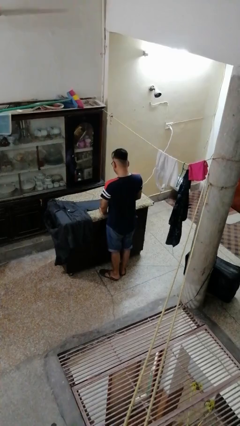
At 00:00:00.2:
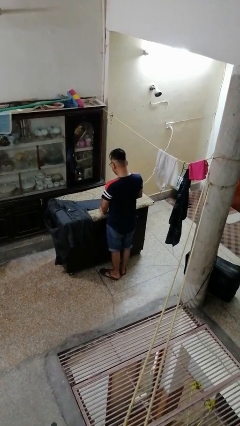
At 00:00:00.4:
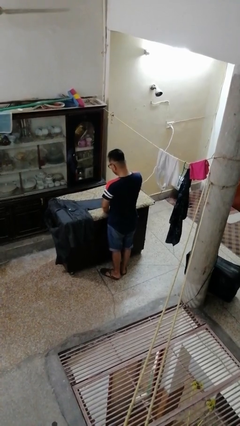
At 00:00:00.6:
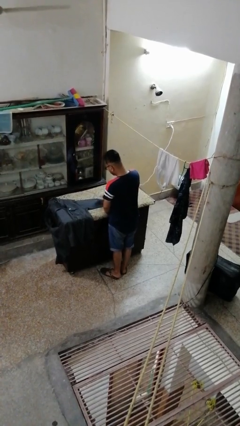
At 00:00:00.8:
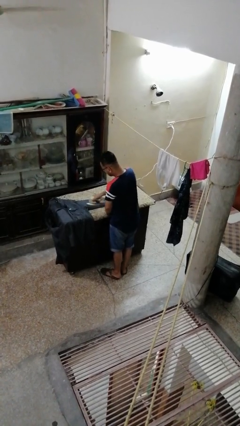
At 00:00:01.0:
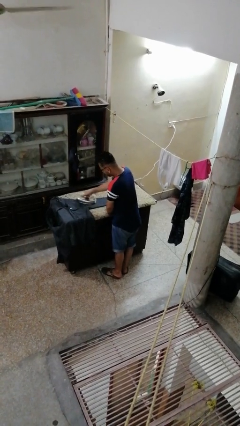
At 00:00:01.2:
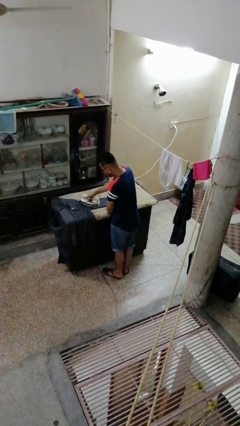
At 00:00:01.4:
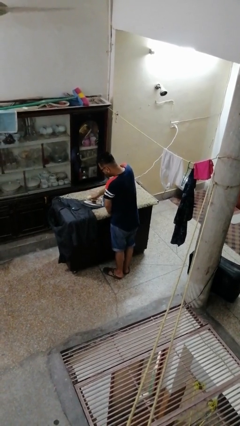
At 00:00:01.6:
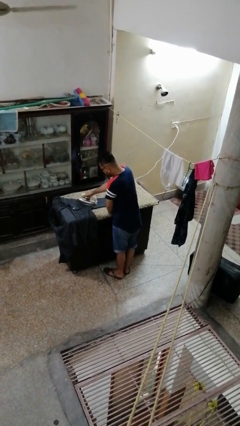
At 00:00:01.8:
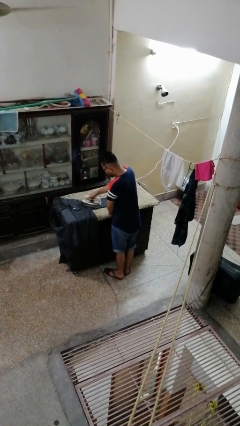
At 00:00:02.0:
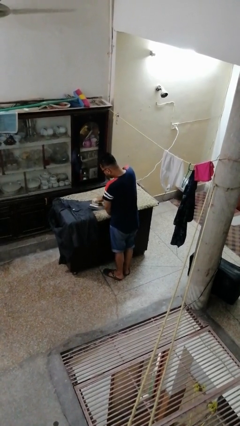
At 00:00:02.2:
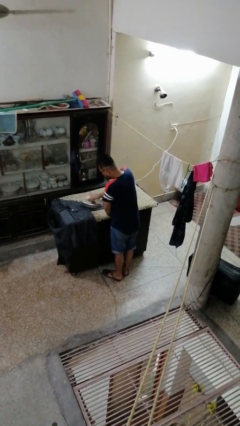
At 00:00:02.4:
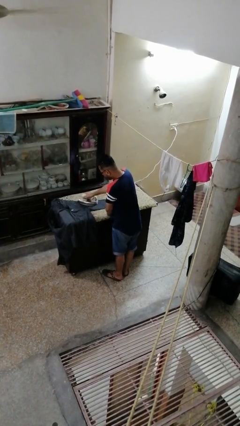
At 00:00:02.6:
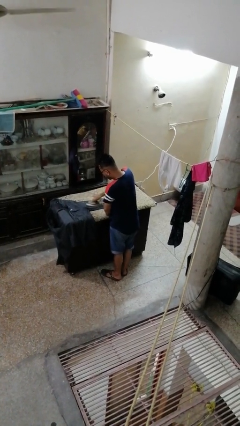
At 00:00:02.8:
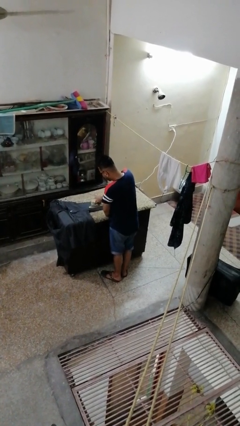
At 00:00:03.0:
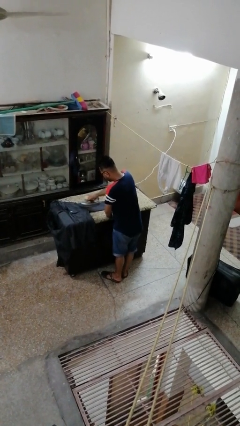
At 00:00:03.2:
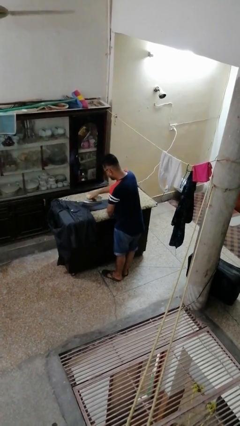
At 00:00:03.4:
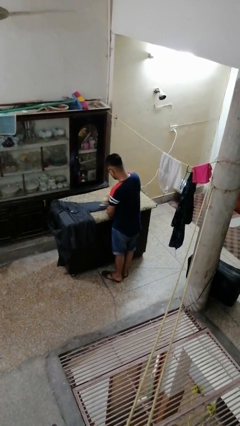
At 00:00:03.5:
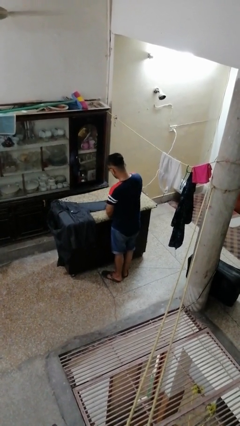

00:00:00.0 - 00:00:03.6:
person irons clothes

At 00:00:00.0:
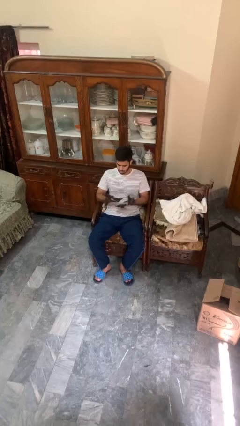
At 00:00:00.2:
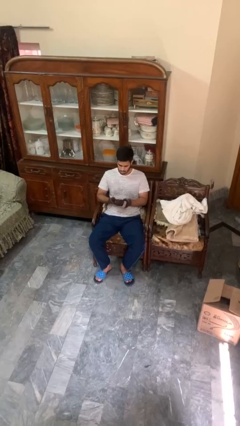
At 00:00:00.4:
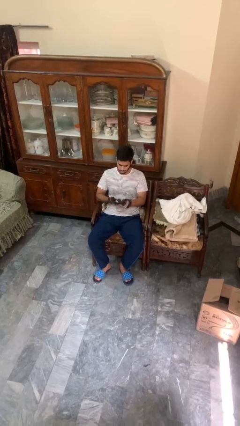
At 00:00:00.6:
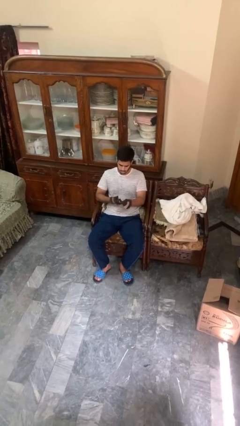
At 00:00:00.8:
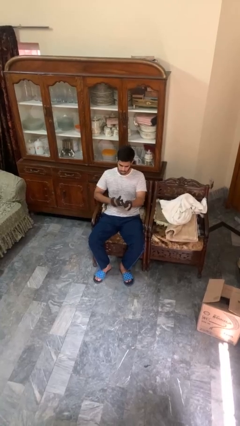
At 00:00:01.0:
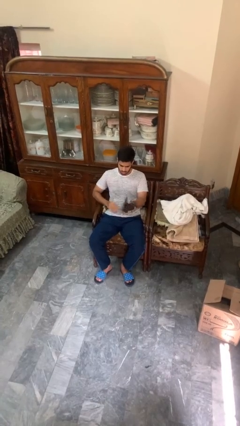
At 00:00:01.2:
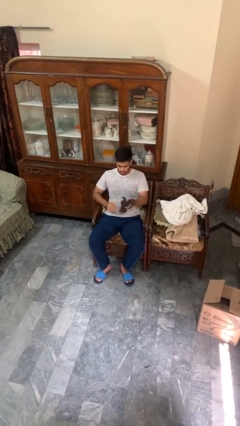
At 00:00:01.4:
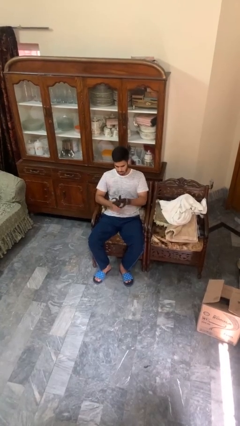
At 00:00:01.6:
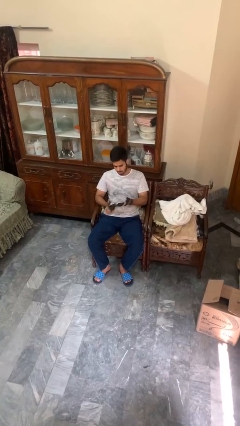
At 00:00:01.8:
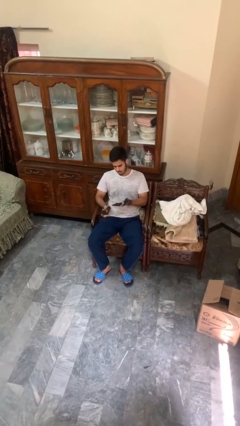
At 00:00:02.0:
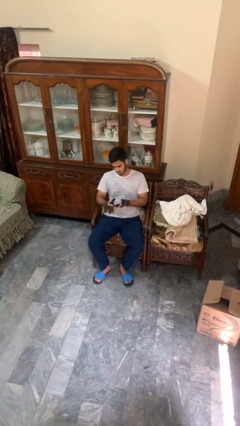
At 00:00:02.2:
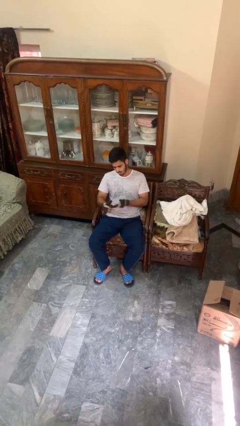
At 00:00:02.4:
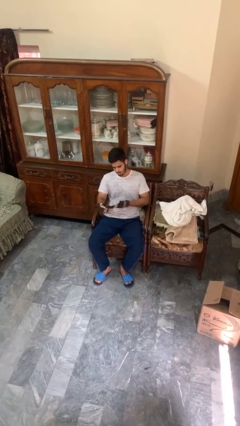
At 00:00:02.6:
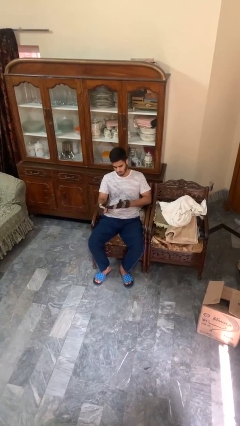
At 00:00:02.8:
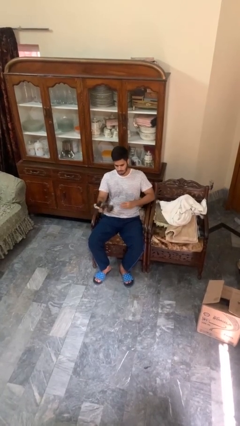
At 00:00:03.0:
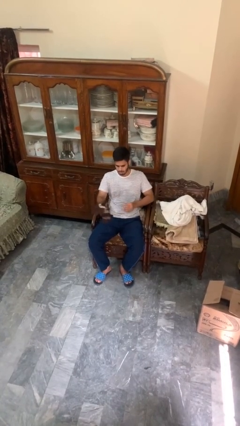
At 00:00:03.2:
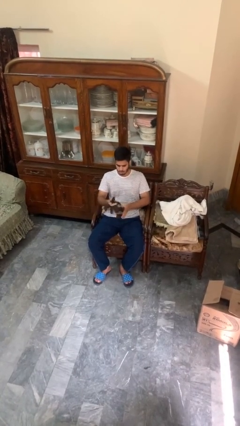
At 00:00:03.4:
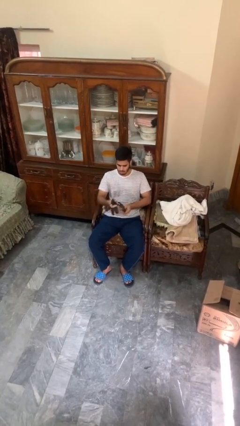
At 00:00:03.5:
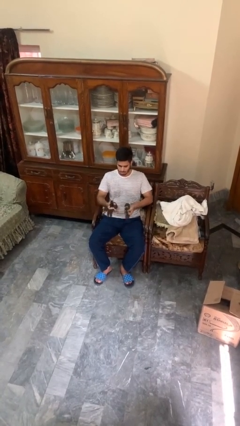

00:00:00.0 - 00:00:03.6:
person takes off gloves

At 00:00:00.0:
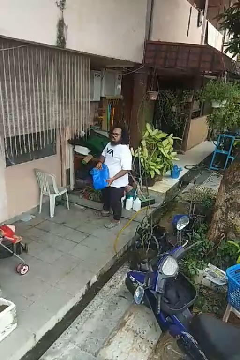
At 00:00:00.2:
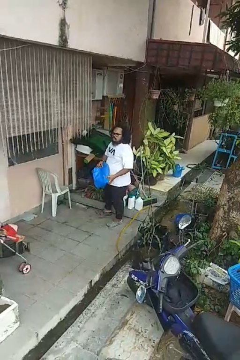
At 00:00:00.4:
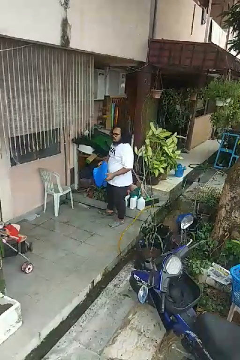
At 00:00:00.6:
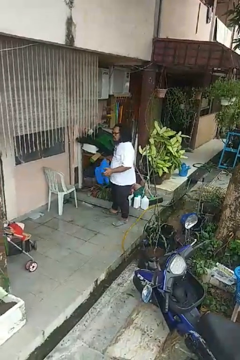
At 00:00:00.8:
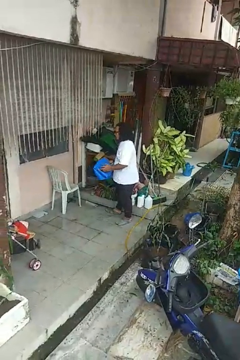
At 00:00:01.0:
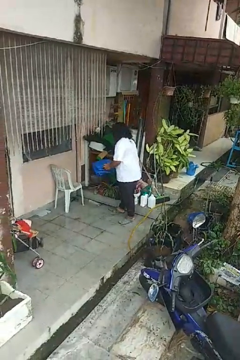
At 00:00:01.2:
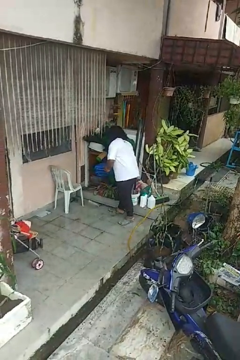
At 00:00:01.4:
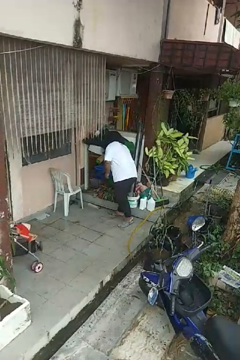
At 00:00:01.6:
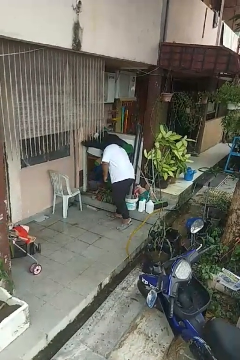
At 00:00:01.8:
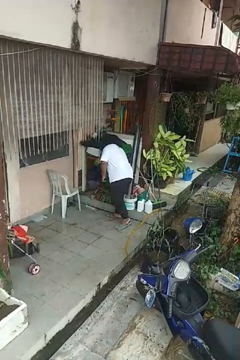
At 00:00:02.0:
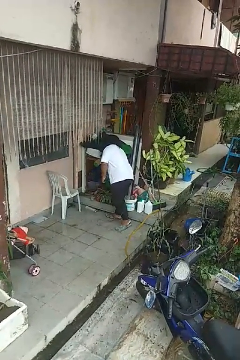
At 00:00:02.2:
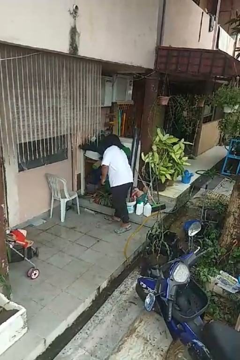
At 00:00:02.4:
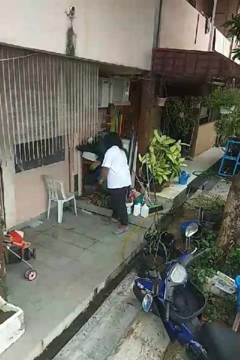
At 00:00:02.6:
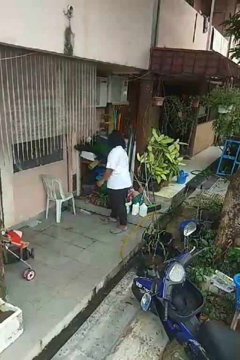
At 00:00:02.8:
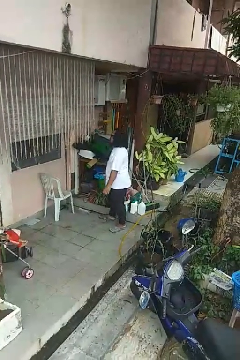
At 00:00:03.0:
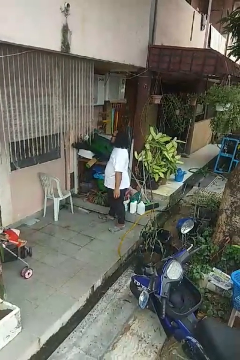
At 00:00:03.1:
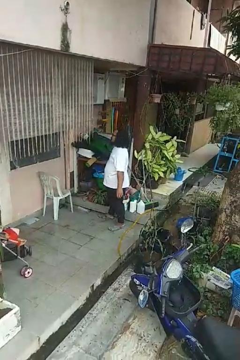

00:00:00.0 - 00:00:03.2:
person puts down object into cabinet

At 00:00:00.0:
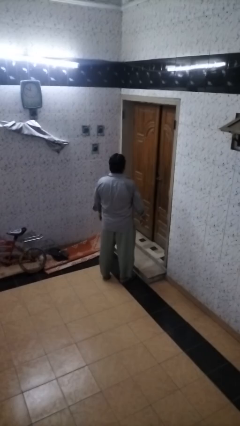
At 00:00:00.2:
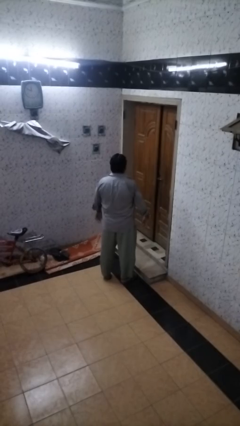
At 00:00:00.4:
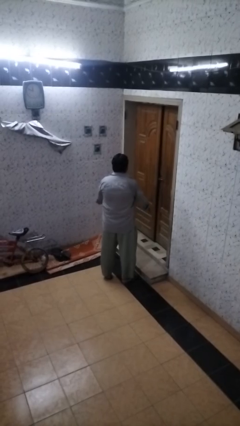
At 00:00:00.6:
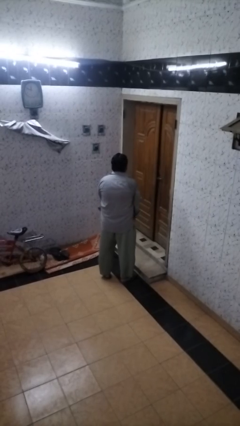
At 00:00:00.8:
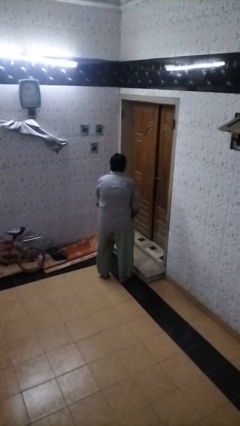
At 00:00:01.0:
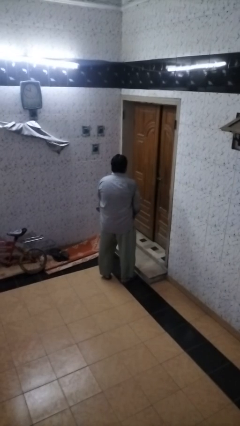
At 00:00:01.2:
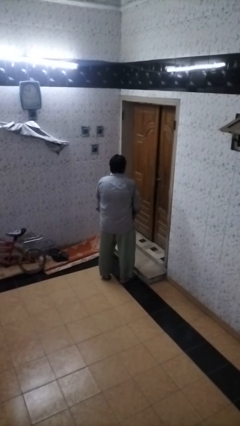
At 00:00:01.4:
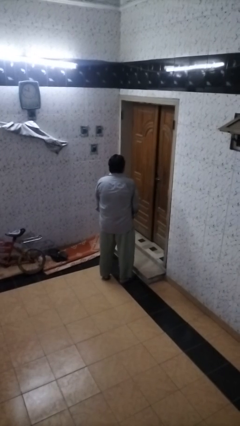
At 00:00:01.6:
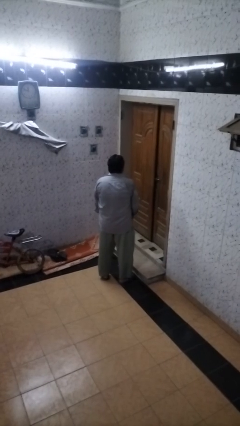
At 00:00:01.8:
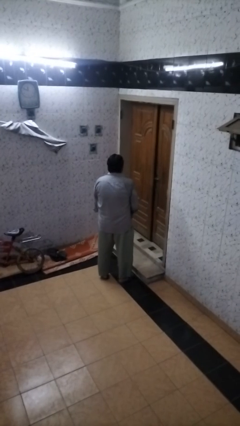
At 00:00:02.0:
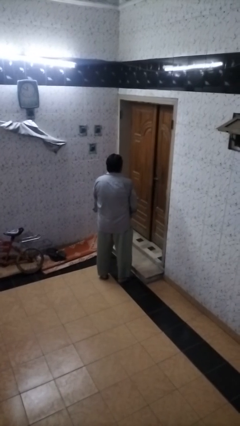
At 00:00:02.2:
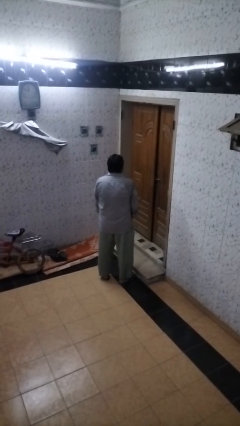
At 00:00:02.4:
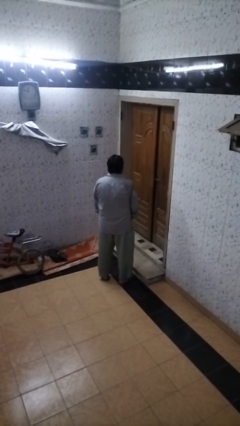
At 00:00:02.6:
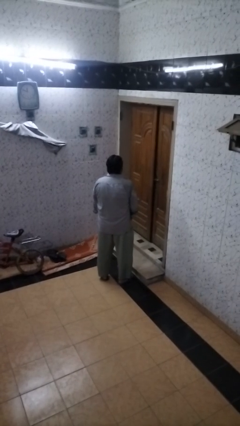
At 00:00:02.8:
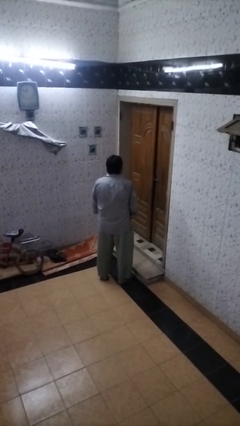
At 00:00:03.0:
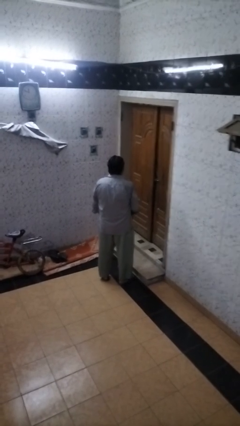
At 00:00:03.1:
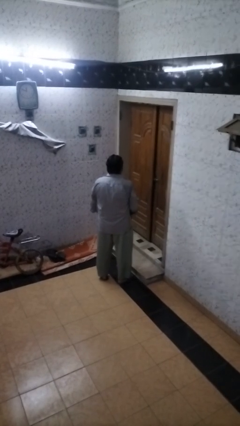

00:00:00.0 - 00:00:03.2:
person slaps hands on thighs

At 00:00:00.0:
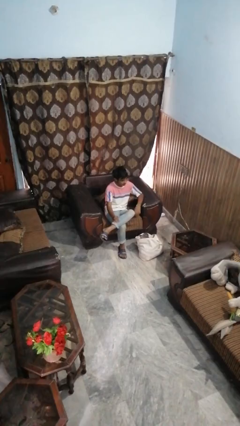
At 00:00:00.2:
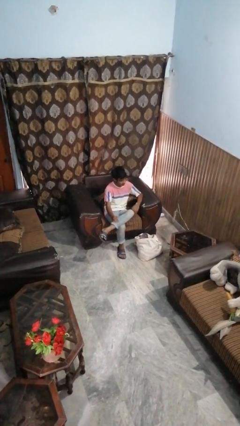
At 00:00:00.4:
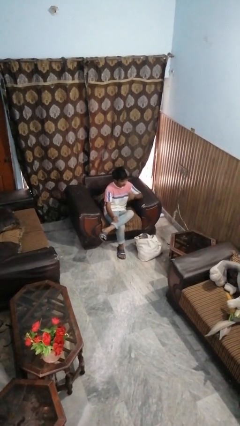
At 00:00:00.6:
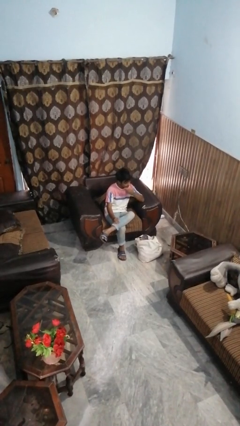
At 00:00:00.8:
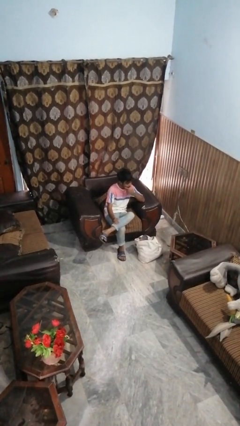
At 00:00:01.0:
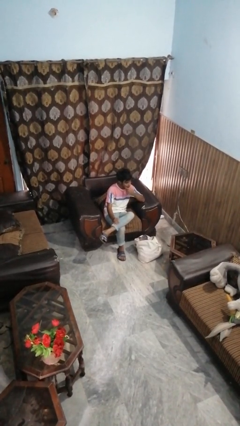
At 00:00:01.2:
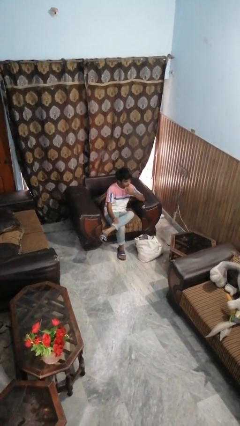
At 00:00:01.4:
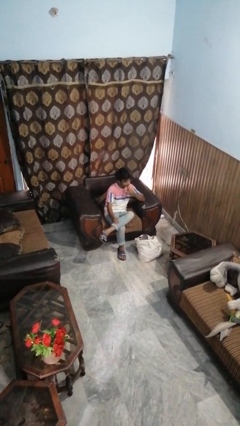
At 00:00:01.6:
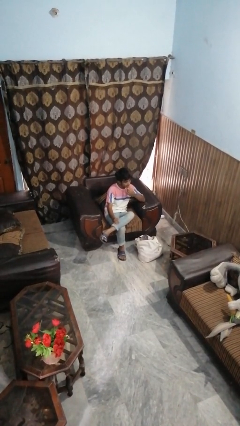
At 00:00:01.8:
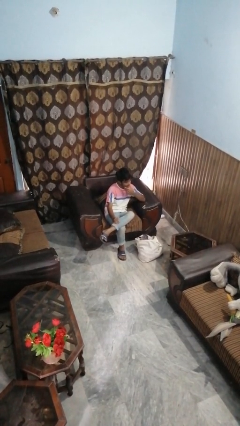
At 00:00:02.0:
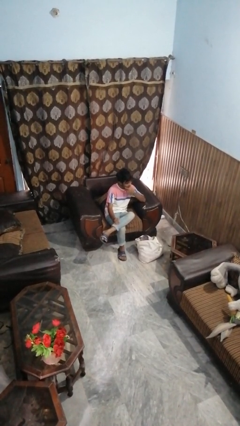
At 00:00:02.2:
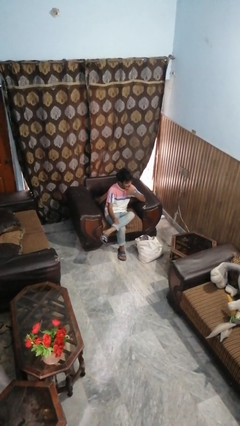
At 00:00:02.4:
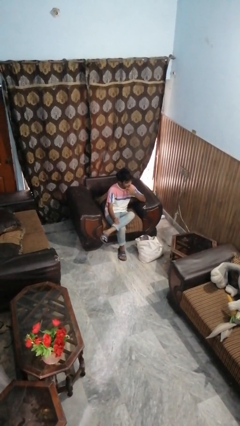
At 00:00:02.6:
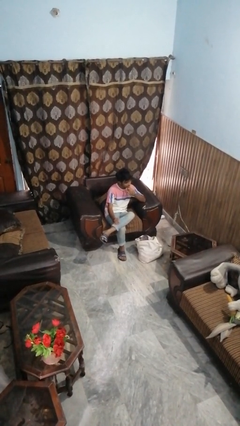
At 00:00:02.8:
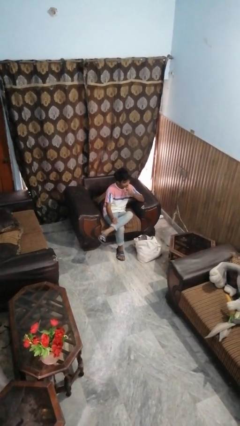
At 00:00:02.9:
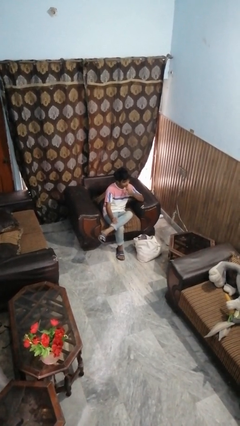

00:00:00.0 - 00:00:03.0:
person strokes chin

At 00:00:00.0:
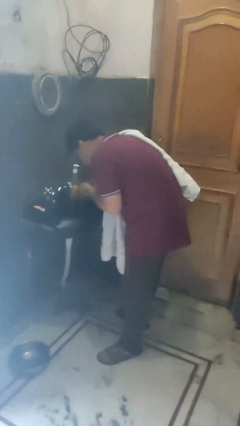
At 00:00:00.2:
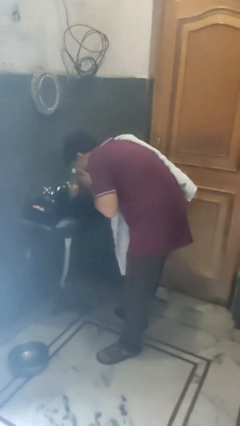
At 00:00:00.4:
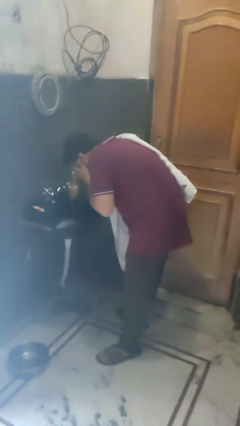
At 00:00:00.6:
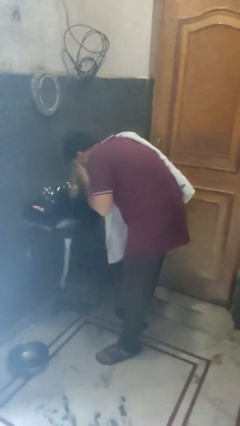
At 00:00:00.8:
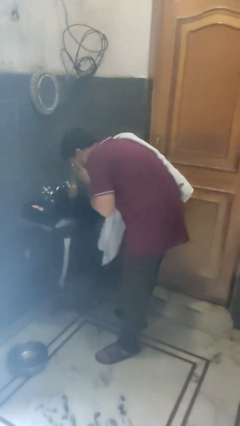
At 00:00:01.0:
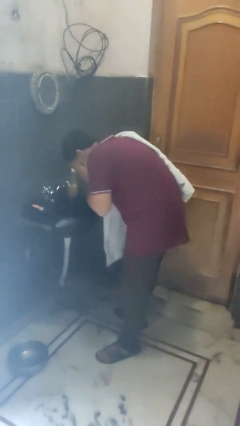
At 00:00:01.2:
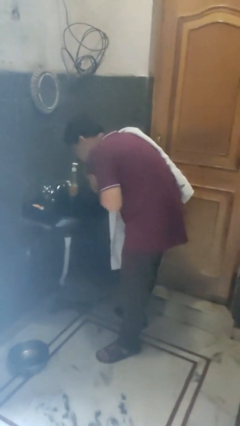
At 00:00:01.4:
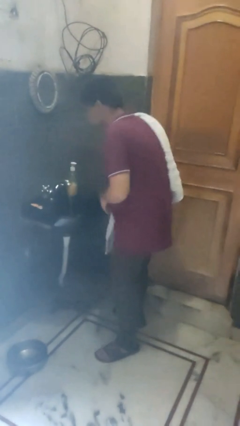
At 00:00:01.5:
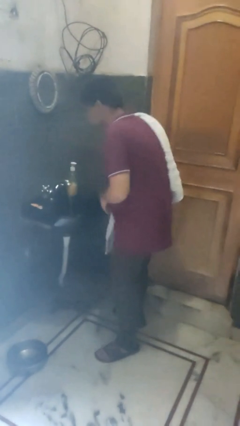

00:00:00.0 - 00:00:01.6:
person washes face
